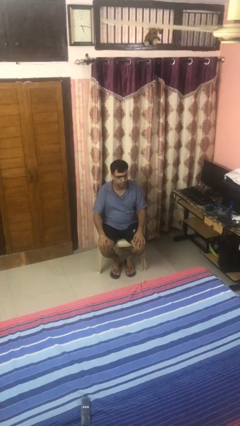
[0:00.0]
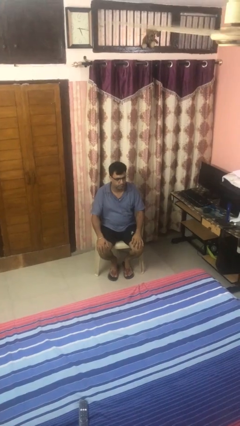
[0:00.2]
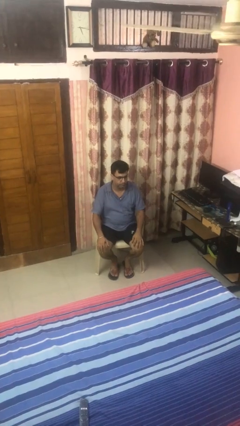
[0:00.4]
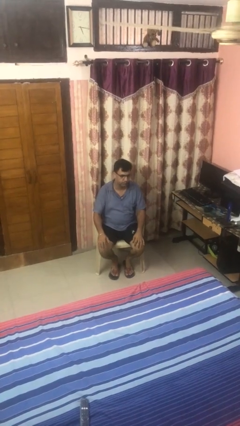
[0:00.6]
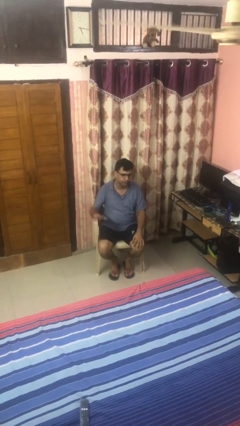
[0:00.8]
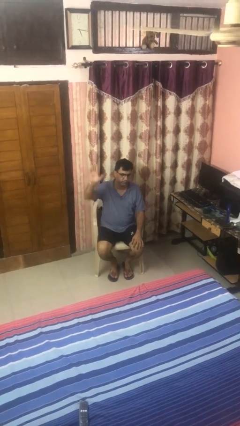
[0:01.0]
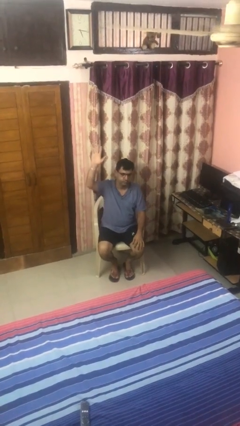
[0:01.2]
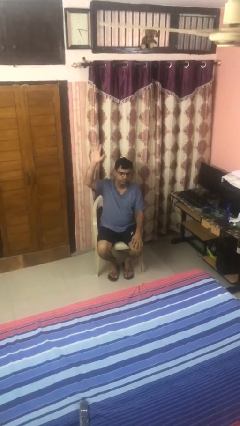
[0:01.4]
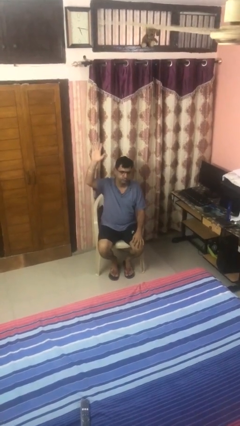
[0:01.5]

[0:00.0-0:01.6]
person gestures raise hand

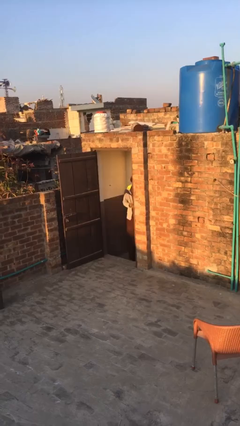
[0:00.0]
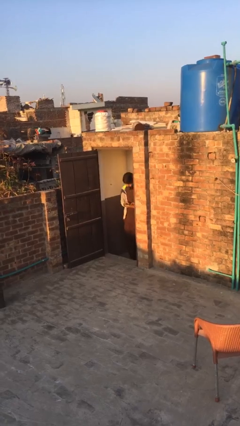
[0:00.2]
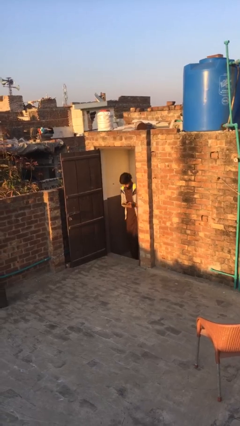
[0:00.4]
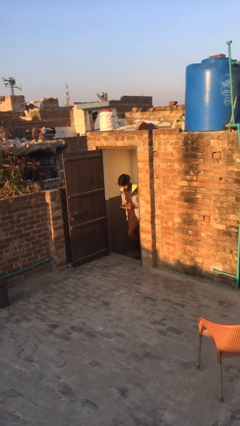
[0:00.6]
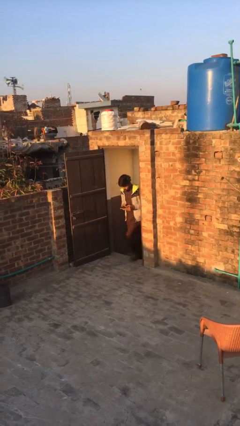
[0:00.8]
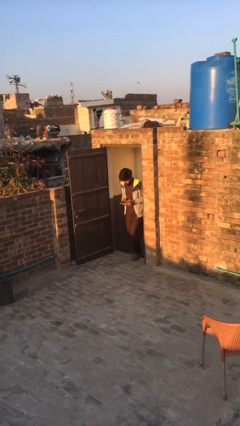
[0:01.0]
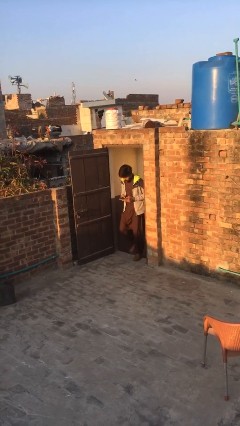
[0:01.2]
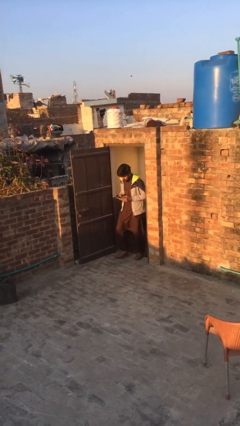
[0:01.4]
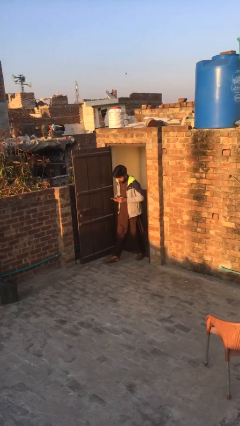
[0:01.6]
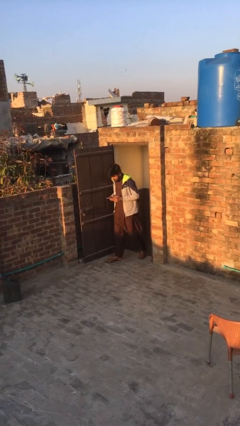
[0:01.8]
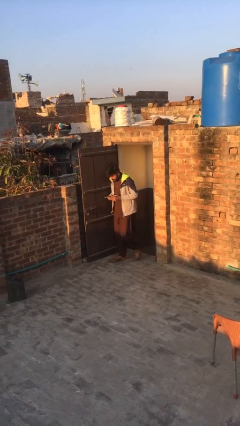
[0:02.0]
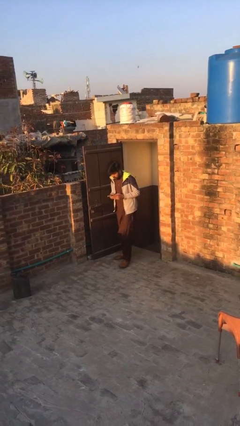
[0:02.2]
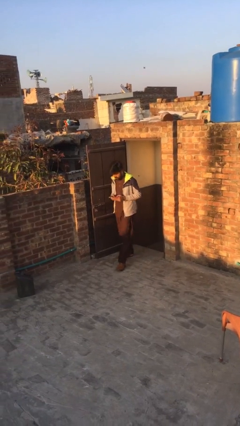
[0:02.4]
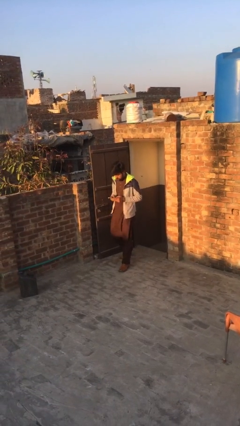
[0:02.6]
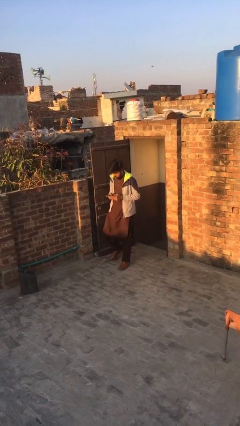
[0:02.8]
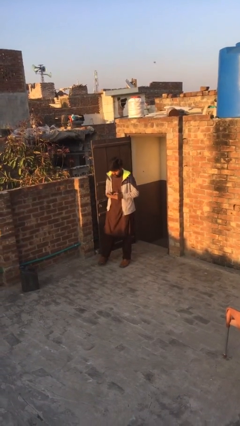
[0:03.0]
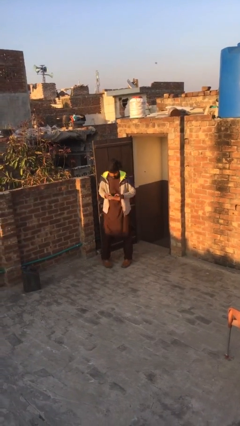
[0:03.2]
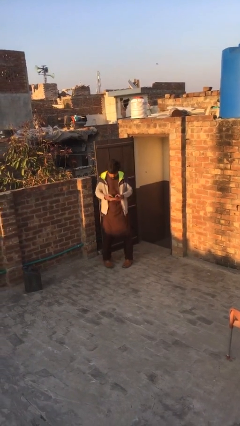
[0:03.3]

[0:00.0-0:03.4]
person exits scene through structure

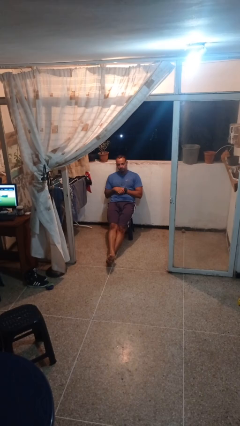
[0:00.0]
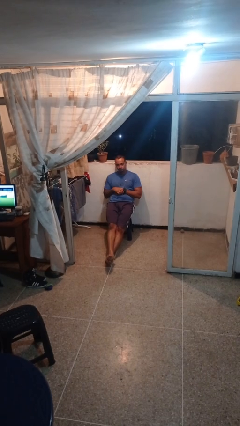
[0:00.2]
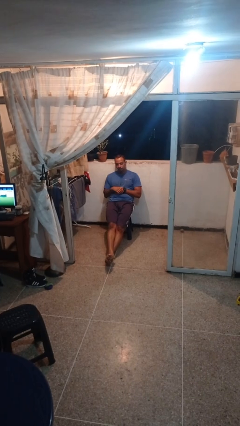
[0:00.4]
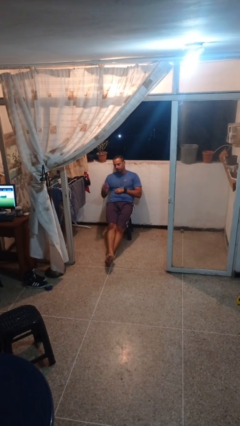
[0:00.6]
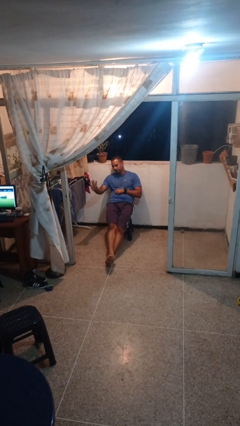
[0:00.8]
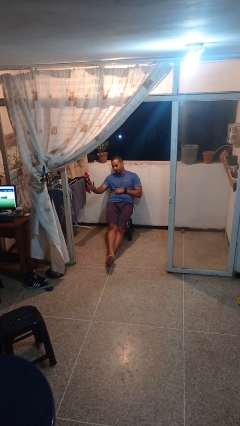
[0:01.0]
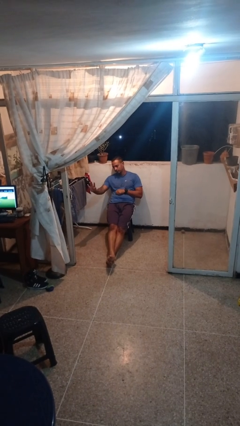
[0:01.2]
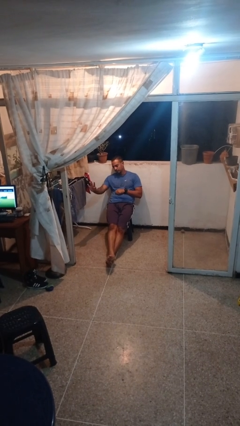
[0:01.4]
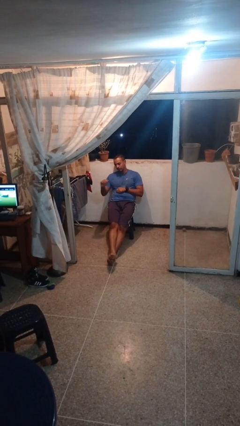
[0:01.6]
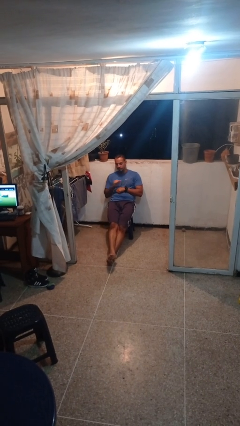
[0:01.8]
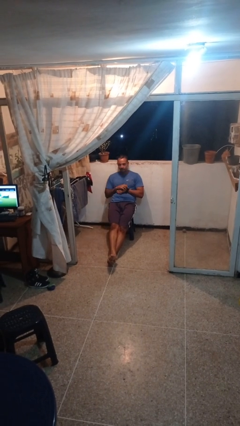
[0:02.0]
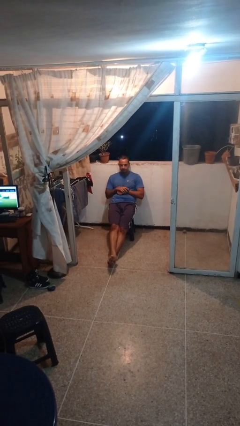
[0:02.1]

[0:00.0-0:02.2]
person gestures number four

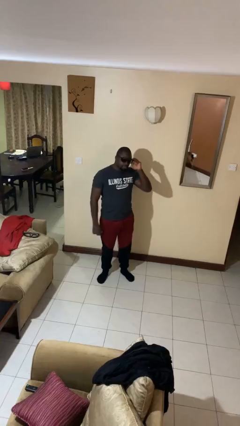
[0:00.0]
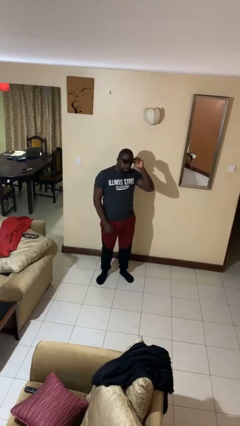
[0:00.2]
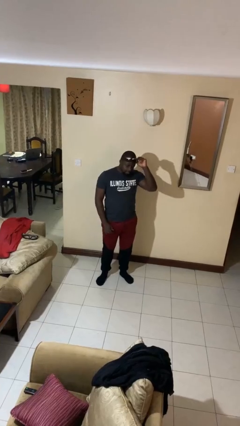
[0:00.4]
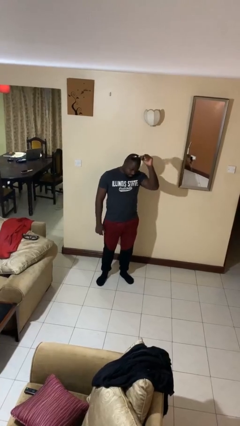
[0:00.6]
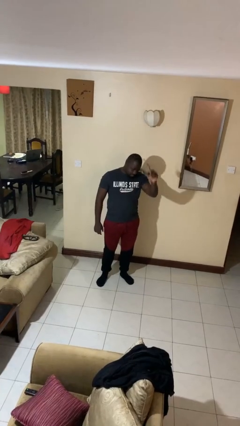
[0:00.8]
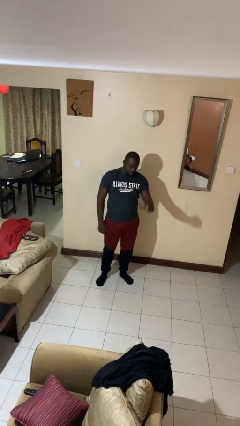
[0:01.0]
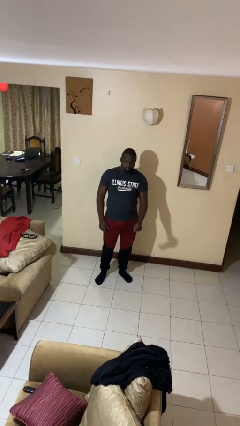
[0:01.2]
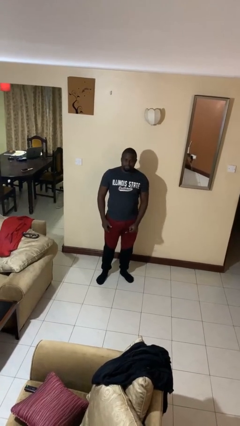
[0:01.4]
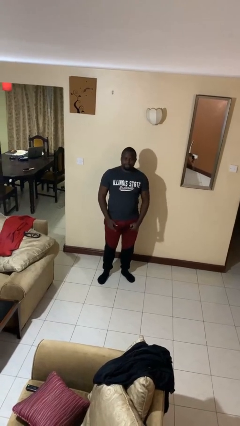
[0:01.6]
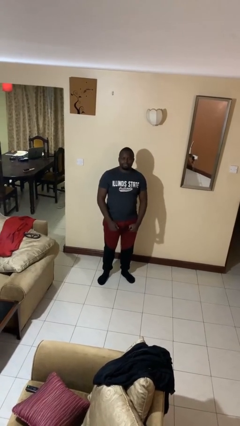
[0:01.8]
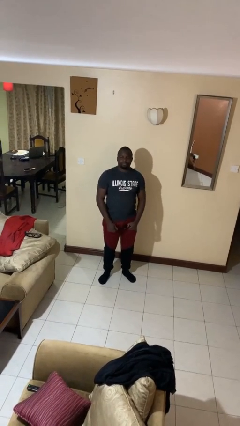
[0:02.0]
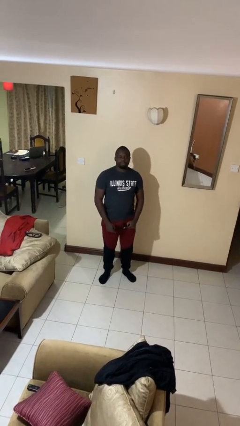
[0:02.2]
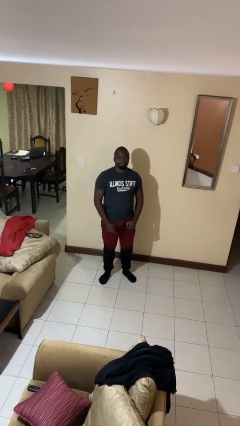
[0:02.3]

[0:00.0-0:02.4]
person takes off sunglasses

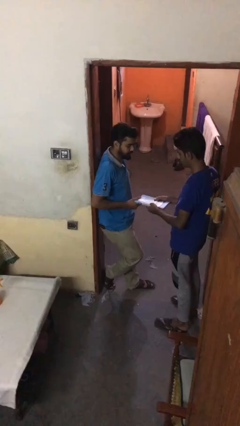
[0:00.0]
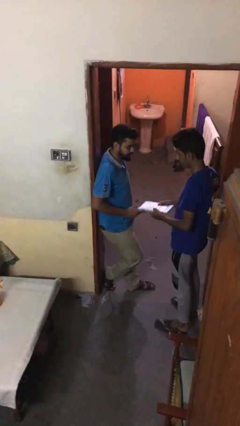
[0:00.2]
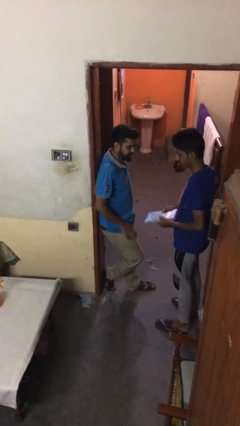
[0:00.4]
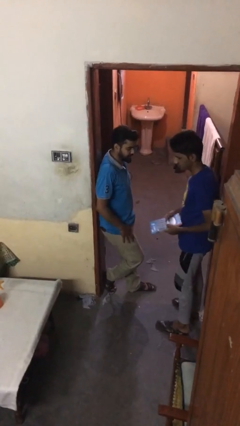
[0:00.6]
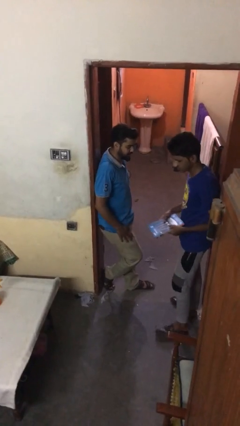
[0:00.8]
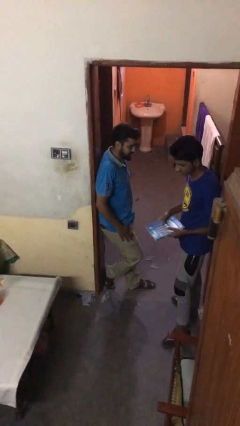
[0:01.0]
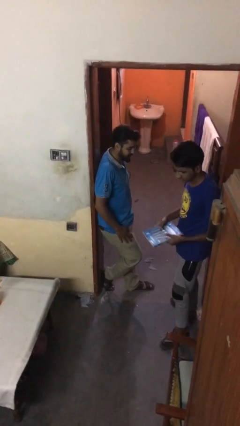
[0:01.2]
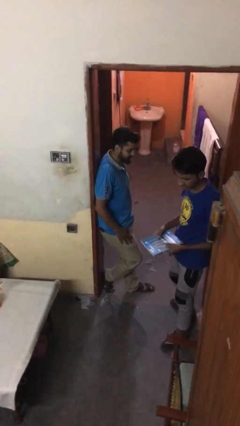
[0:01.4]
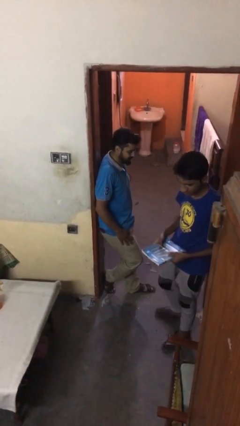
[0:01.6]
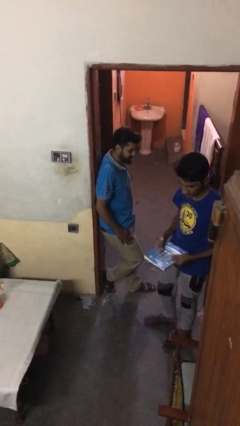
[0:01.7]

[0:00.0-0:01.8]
person transfers object to person

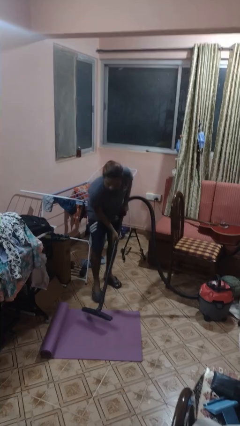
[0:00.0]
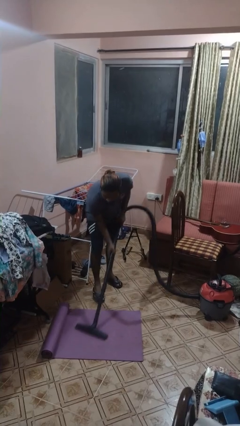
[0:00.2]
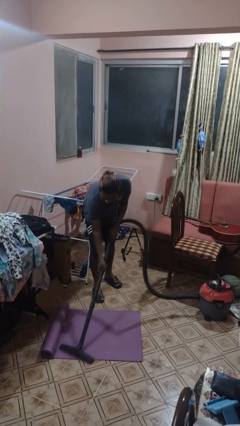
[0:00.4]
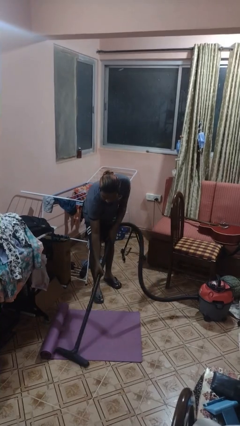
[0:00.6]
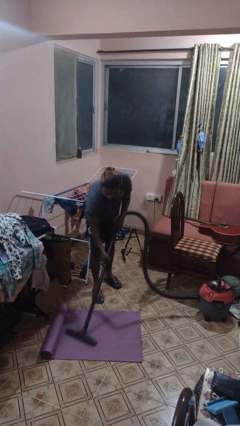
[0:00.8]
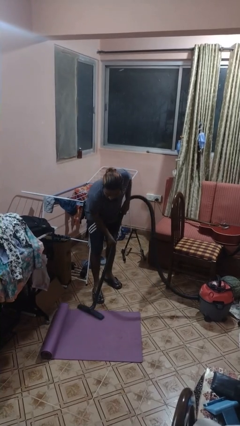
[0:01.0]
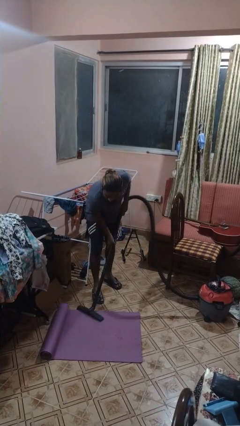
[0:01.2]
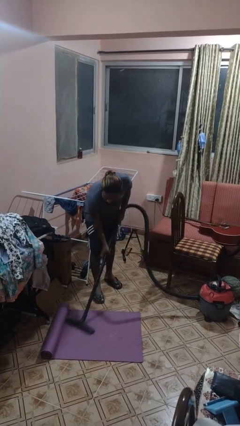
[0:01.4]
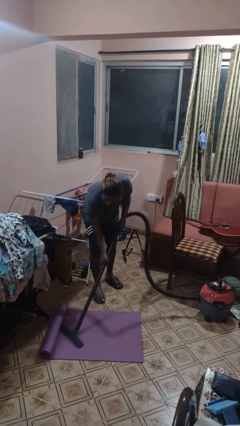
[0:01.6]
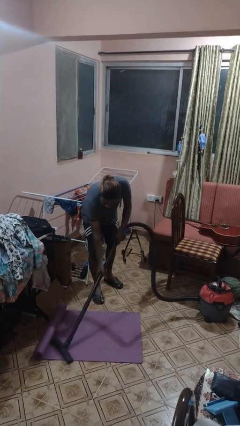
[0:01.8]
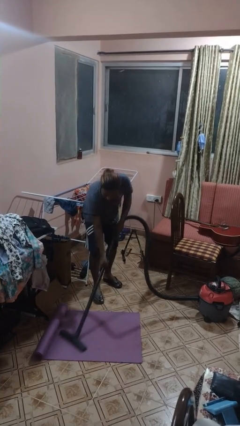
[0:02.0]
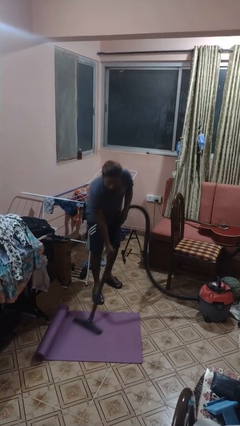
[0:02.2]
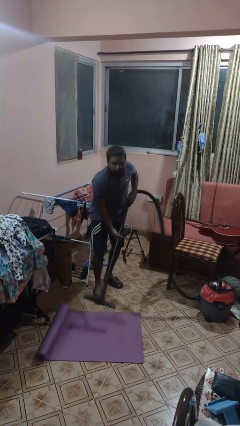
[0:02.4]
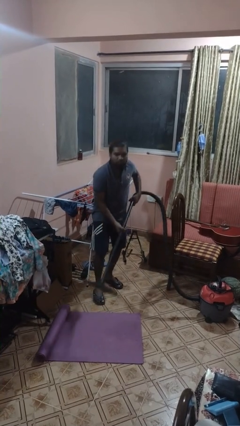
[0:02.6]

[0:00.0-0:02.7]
person vacuums carpet

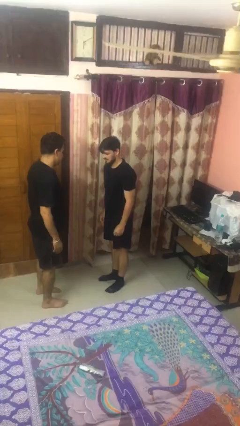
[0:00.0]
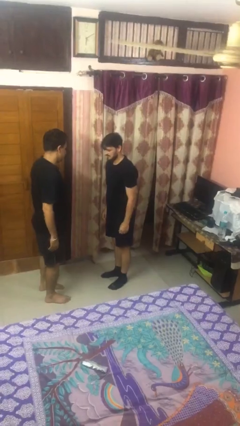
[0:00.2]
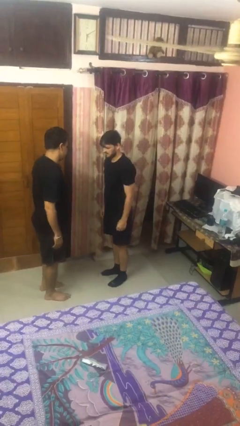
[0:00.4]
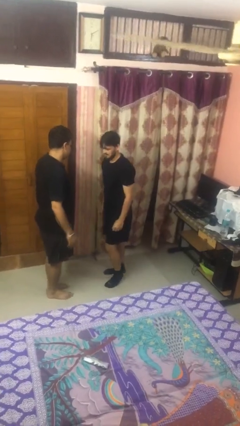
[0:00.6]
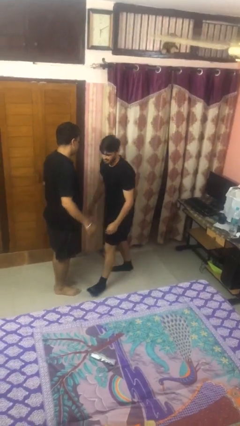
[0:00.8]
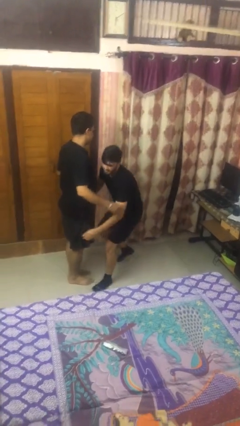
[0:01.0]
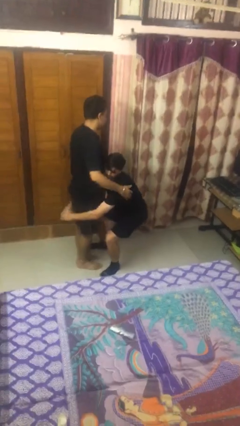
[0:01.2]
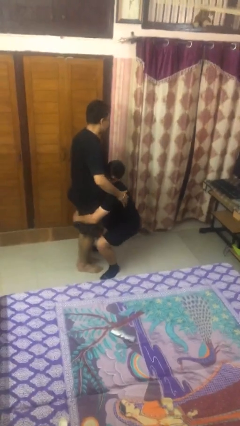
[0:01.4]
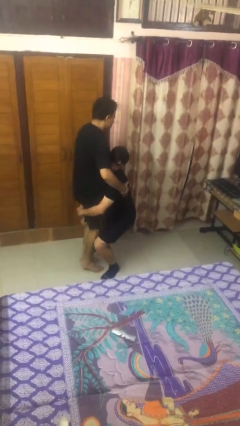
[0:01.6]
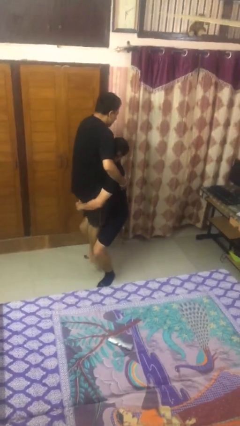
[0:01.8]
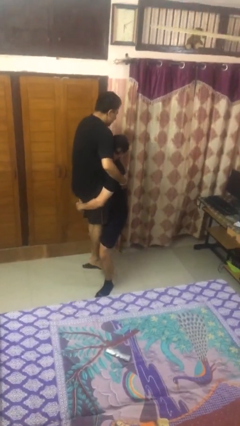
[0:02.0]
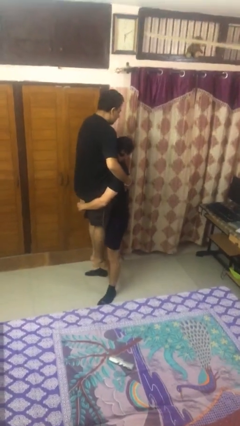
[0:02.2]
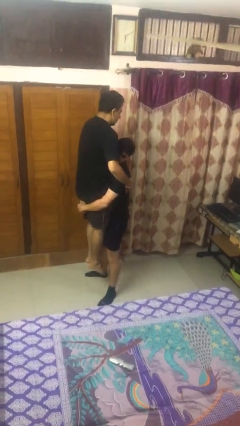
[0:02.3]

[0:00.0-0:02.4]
person picks up person

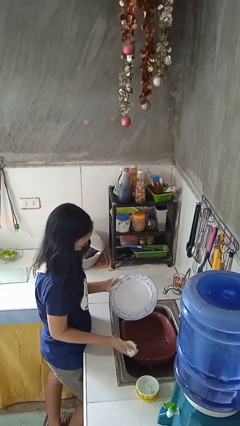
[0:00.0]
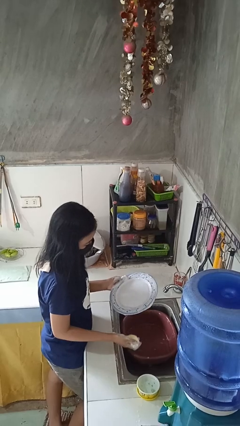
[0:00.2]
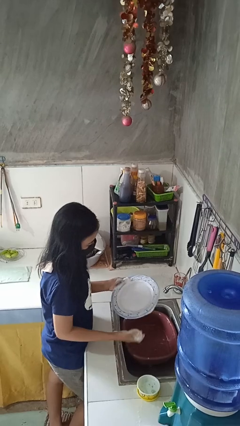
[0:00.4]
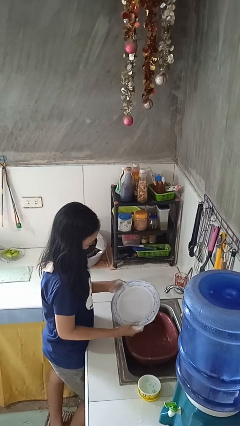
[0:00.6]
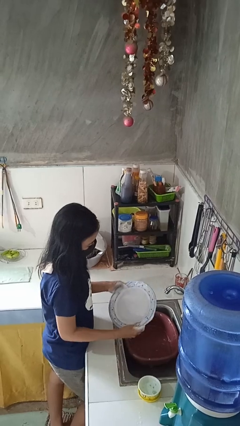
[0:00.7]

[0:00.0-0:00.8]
person washes dish
